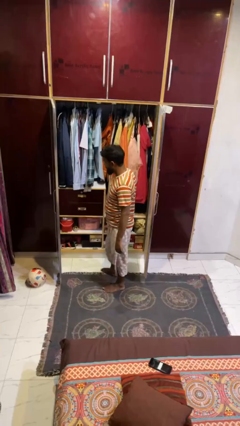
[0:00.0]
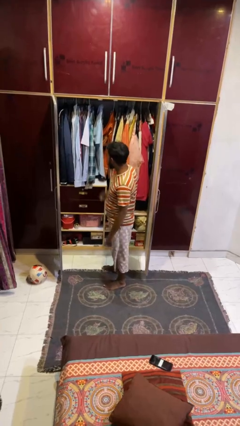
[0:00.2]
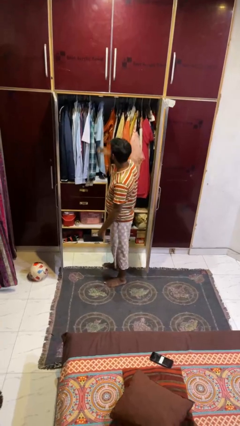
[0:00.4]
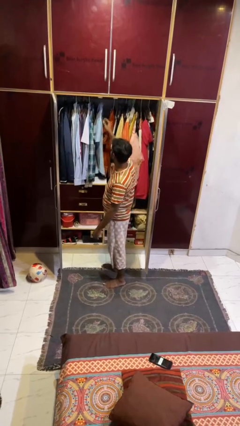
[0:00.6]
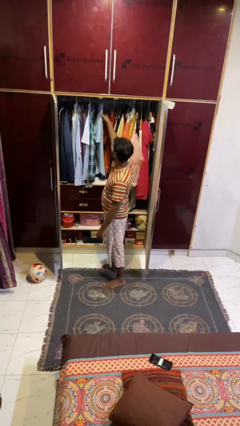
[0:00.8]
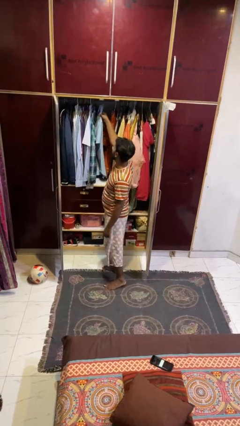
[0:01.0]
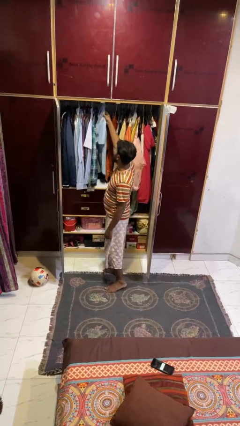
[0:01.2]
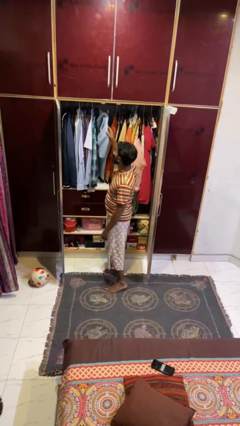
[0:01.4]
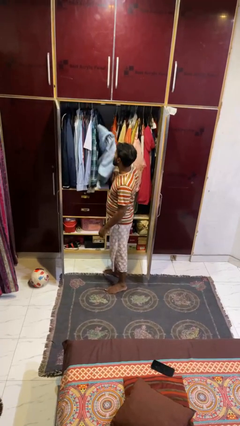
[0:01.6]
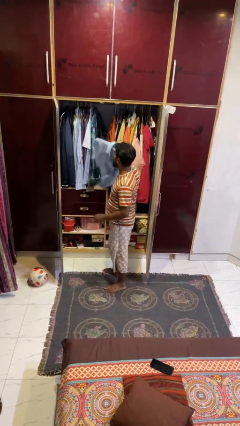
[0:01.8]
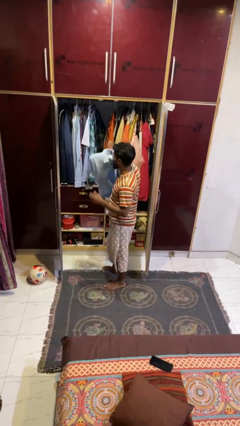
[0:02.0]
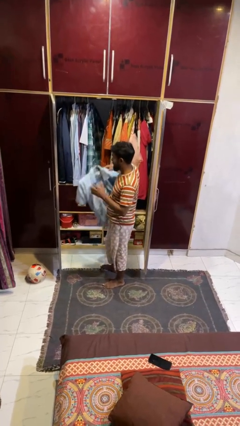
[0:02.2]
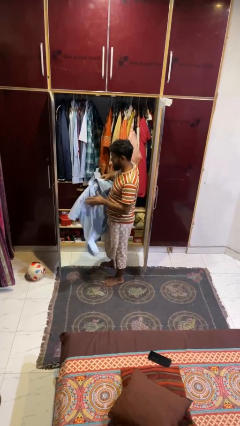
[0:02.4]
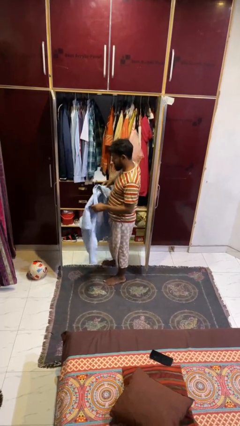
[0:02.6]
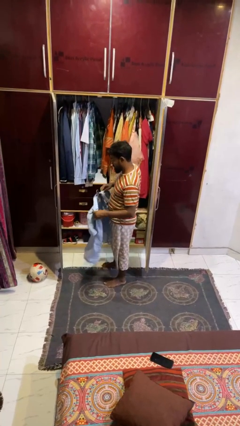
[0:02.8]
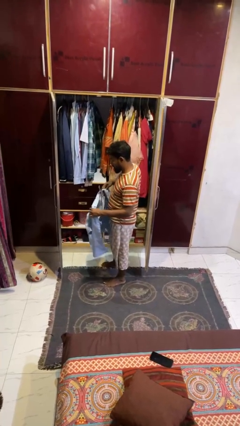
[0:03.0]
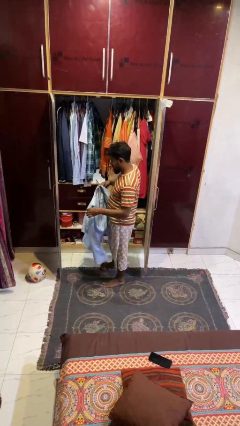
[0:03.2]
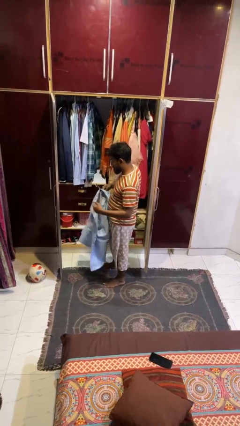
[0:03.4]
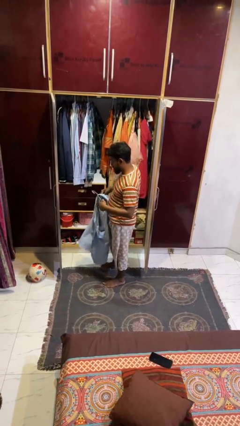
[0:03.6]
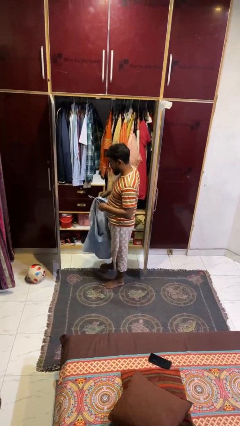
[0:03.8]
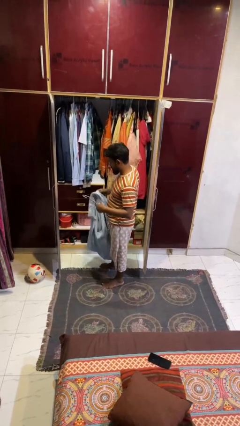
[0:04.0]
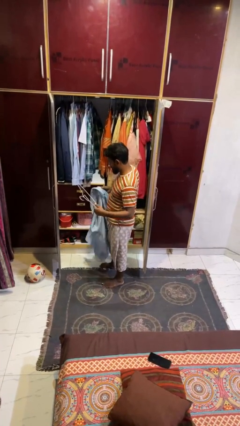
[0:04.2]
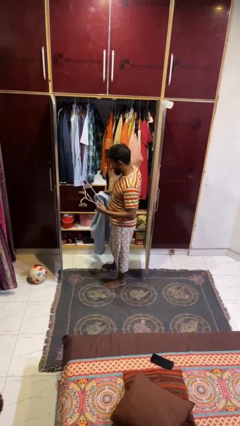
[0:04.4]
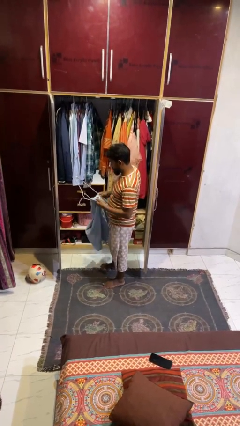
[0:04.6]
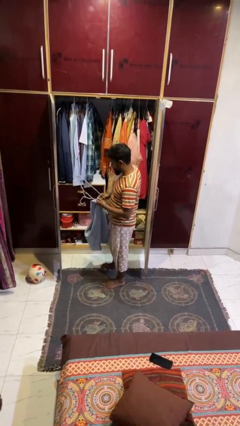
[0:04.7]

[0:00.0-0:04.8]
person takes clothes from closet

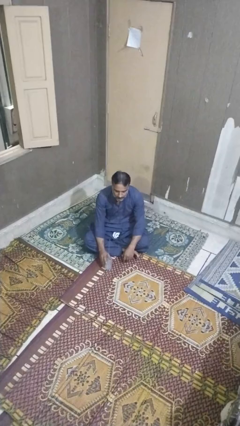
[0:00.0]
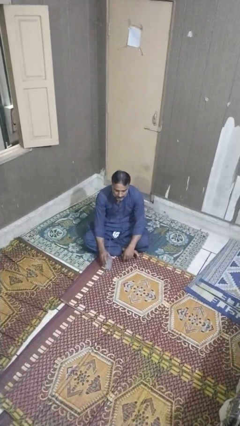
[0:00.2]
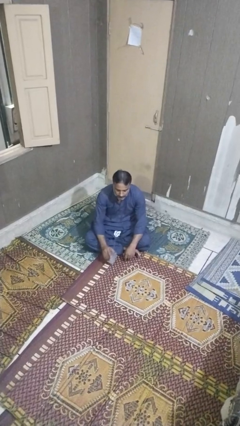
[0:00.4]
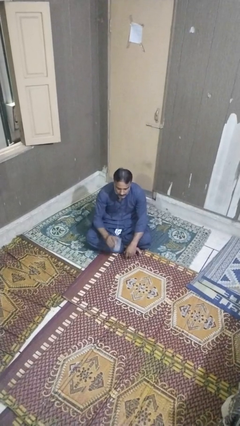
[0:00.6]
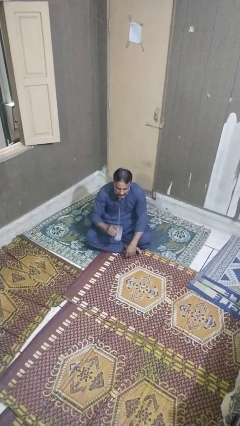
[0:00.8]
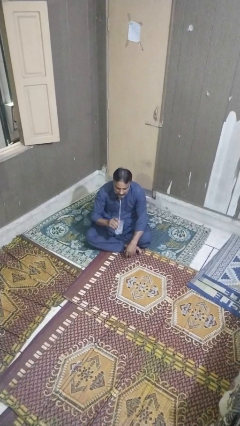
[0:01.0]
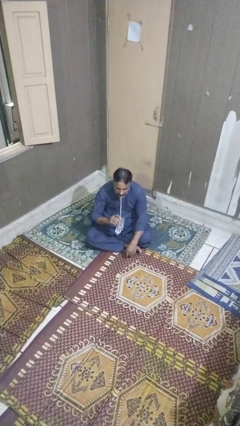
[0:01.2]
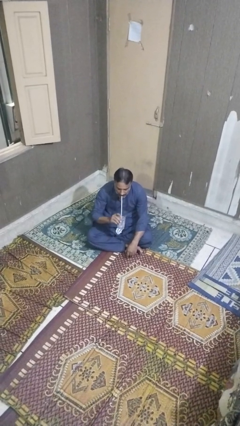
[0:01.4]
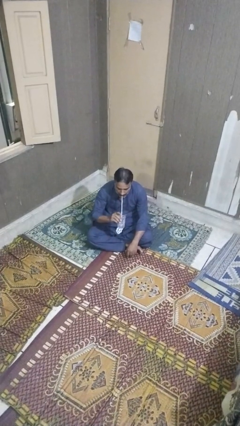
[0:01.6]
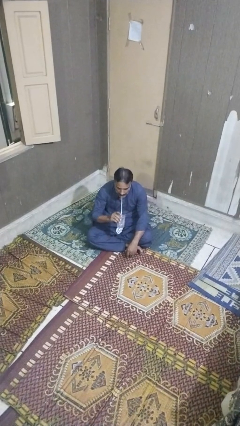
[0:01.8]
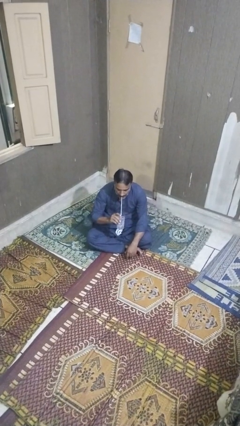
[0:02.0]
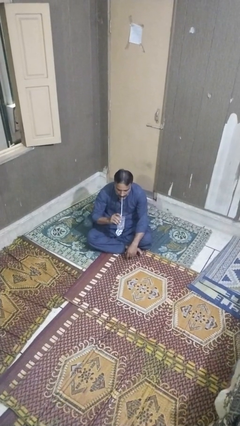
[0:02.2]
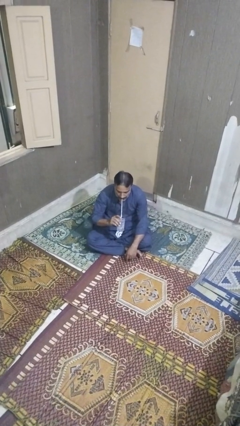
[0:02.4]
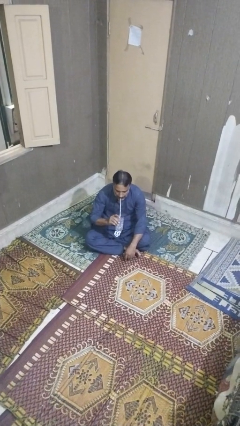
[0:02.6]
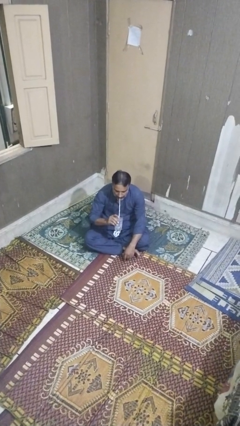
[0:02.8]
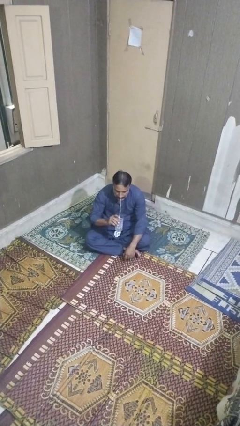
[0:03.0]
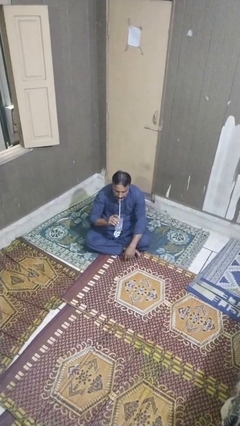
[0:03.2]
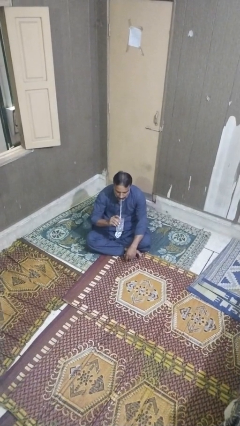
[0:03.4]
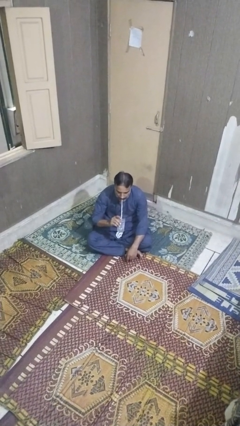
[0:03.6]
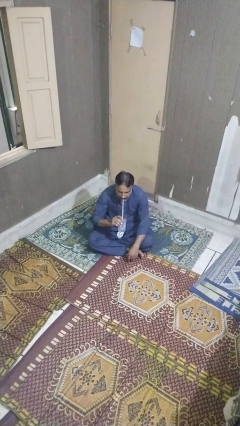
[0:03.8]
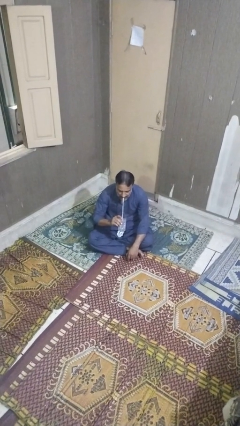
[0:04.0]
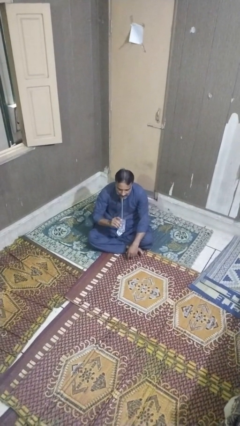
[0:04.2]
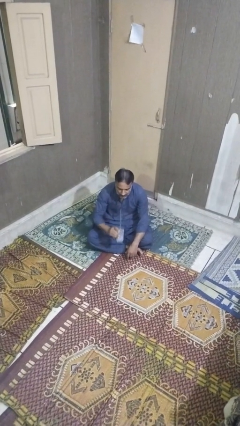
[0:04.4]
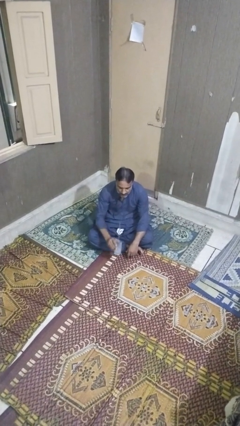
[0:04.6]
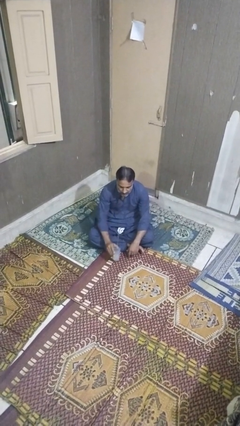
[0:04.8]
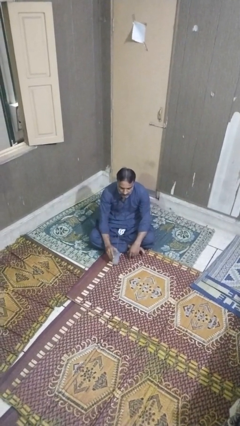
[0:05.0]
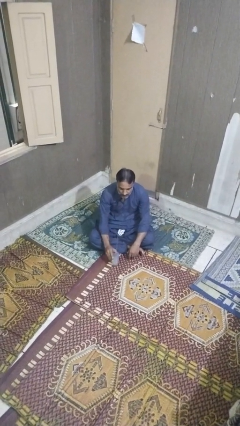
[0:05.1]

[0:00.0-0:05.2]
person drinks from straw

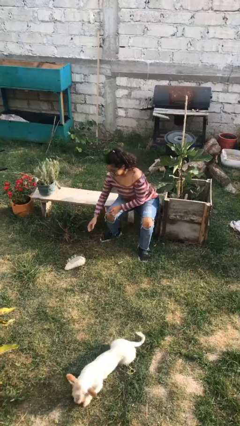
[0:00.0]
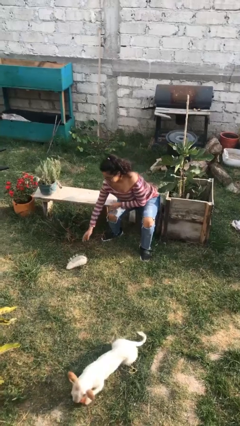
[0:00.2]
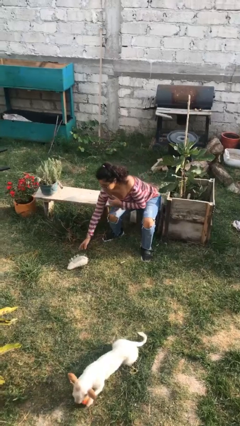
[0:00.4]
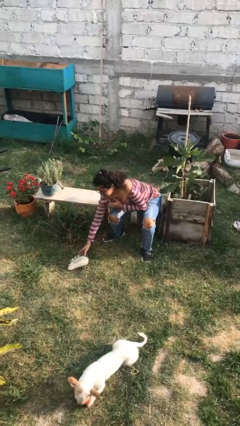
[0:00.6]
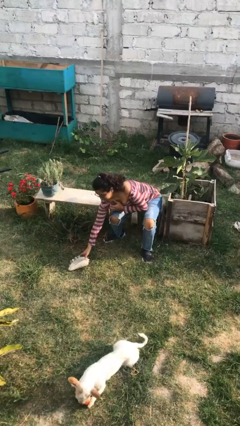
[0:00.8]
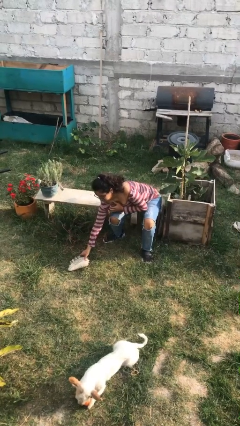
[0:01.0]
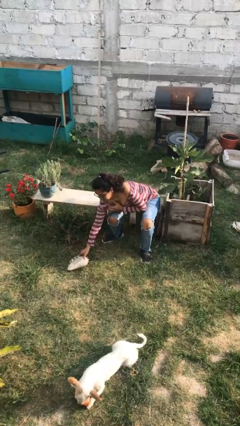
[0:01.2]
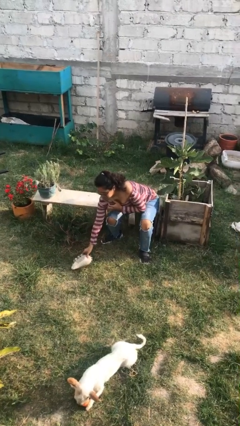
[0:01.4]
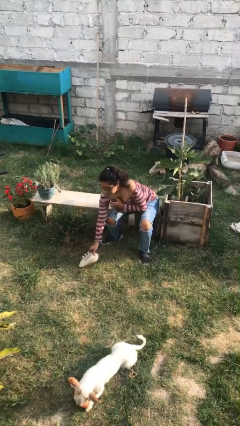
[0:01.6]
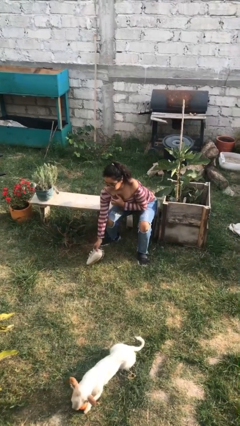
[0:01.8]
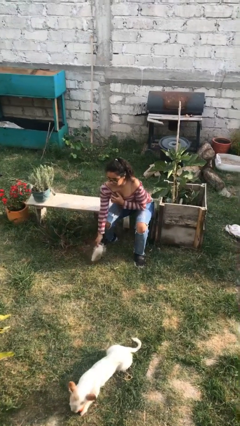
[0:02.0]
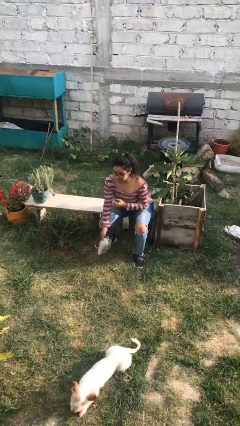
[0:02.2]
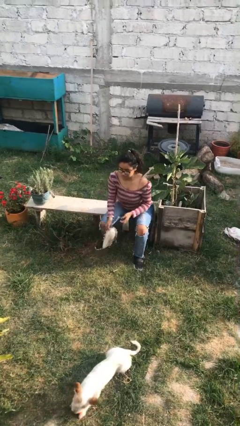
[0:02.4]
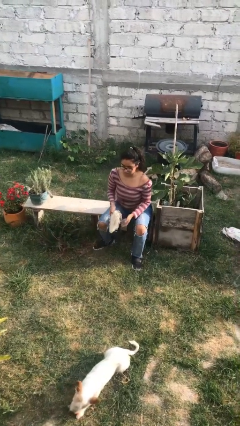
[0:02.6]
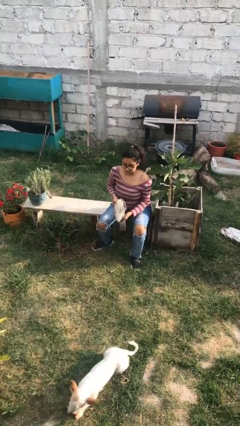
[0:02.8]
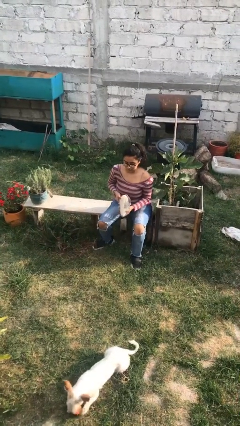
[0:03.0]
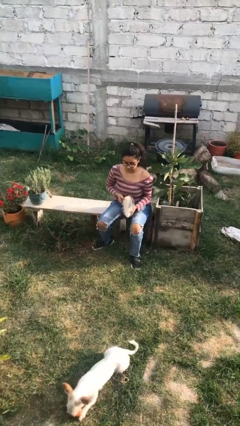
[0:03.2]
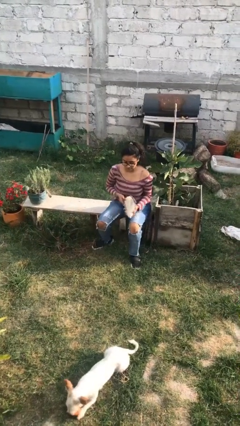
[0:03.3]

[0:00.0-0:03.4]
person picks up object from floor

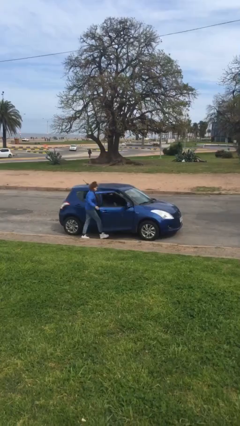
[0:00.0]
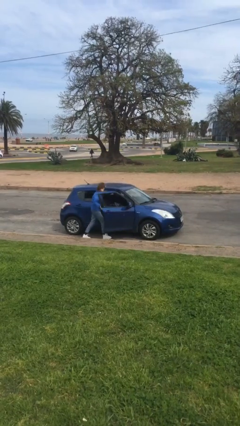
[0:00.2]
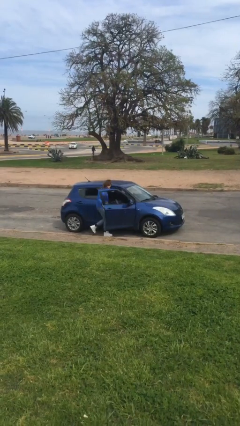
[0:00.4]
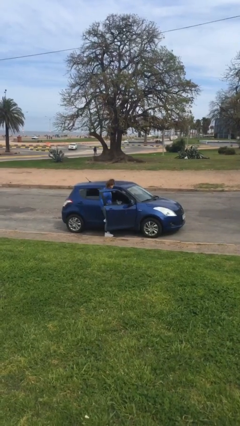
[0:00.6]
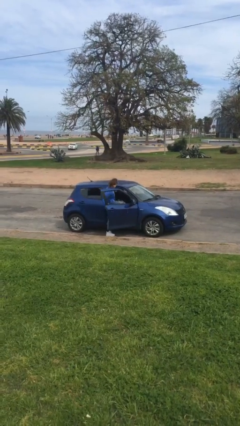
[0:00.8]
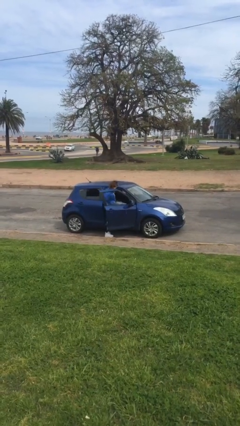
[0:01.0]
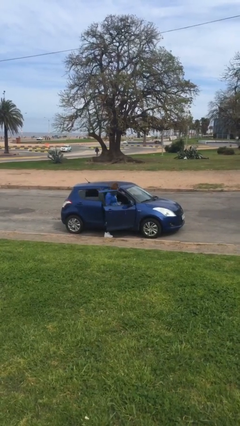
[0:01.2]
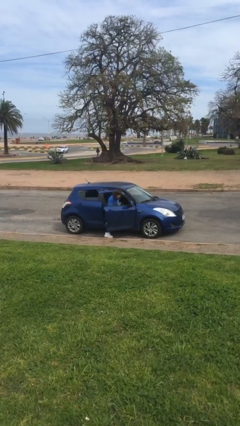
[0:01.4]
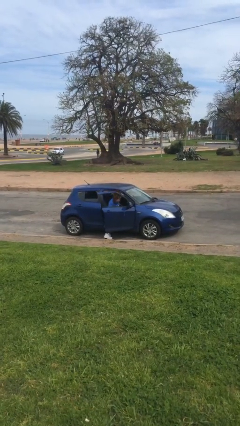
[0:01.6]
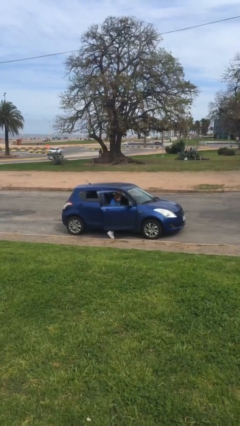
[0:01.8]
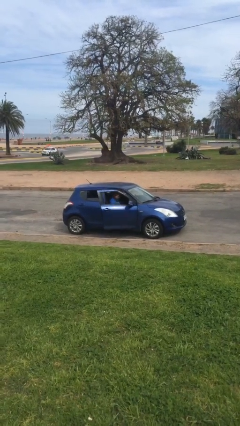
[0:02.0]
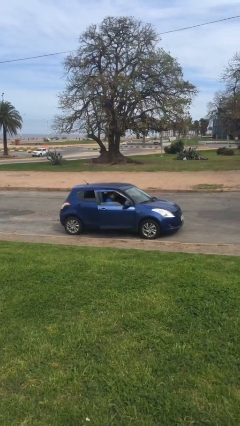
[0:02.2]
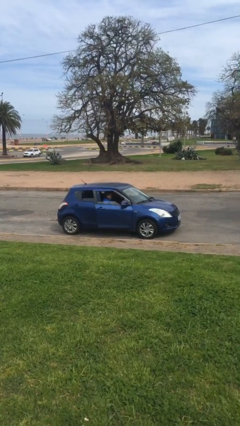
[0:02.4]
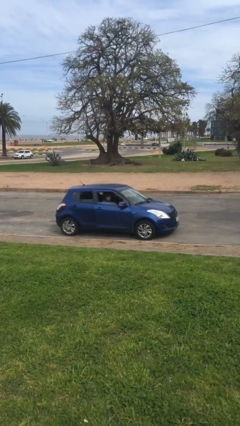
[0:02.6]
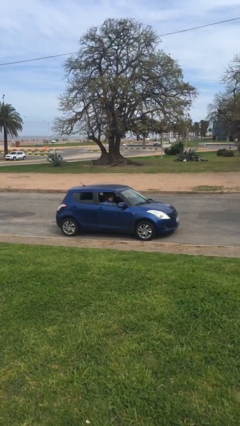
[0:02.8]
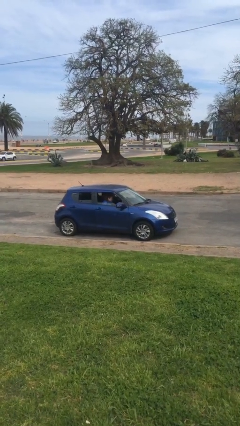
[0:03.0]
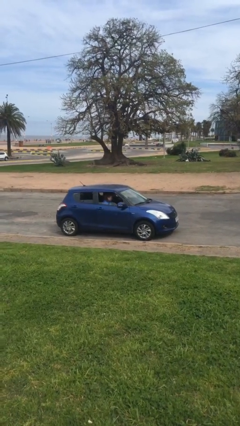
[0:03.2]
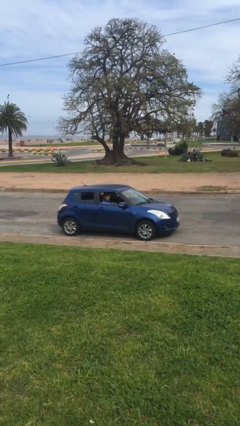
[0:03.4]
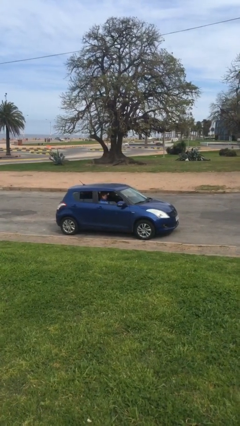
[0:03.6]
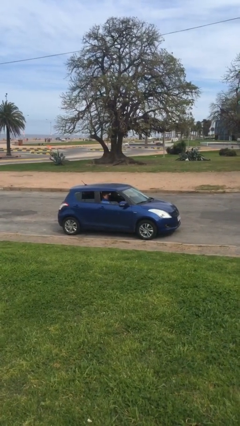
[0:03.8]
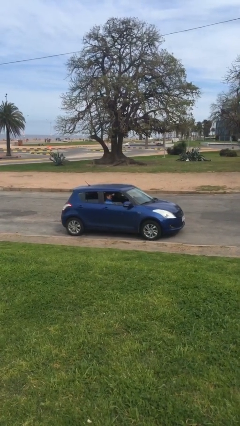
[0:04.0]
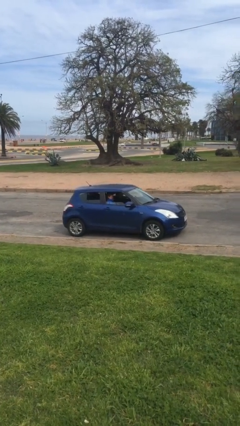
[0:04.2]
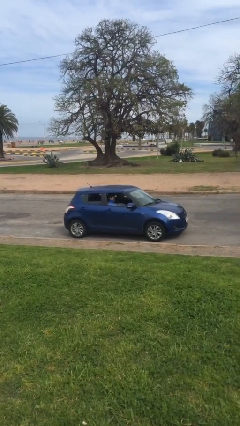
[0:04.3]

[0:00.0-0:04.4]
car picks up person

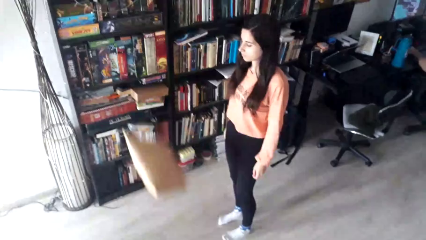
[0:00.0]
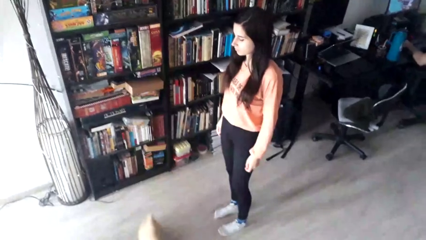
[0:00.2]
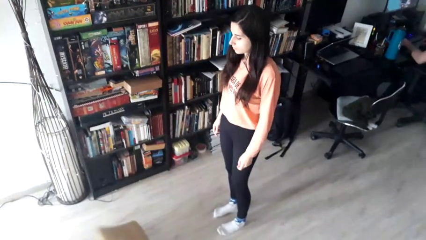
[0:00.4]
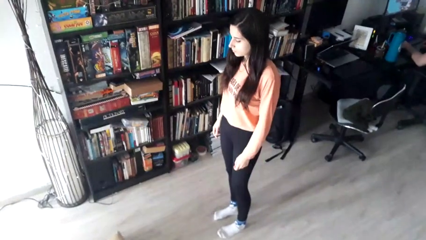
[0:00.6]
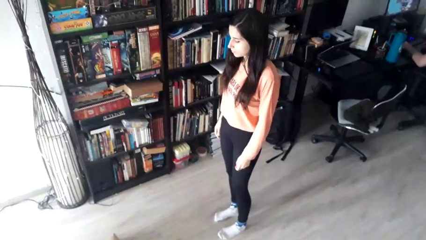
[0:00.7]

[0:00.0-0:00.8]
person throws object into air
